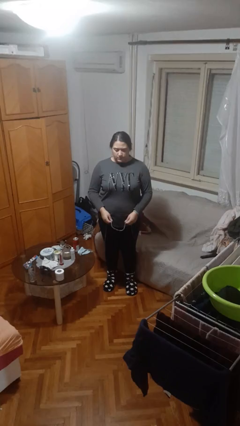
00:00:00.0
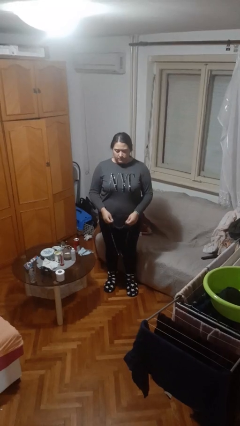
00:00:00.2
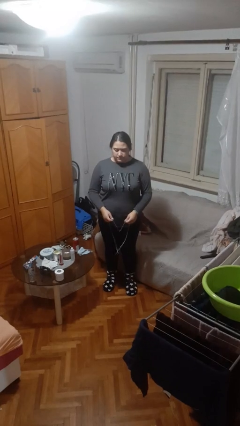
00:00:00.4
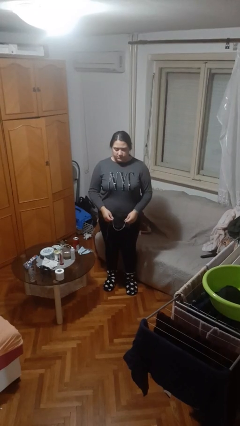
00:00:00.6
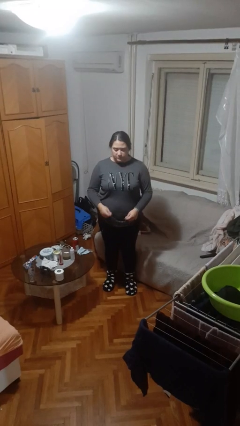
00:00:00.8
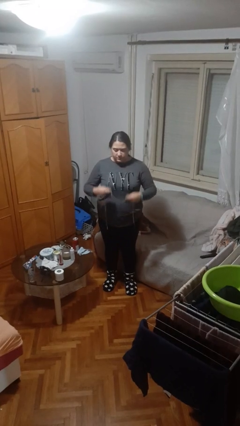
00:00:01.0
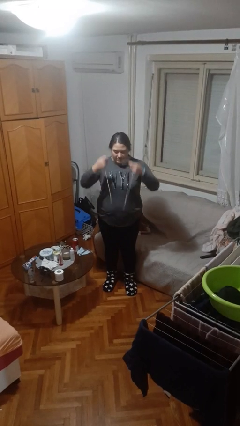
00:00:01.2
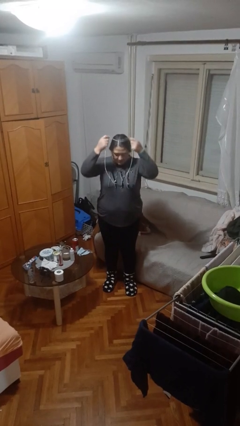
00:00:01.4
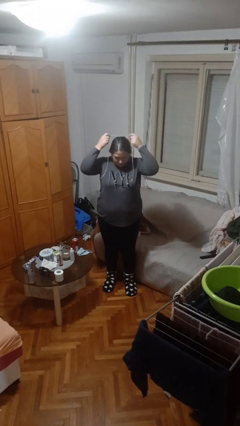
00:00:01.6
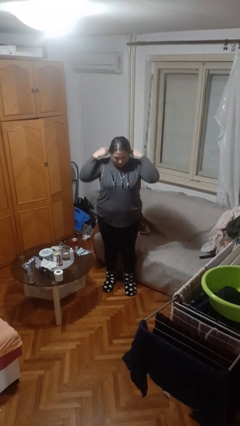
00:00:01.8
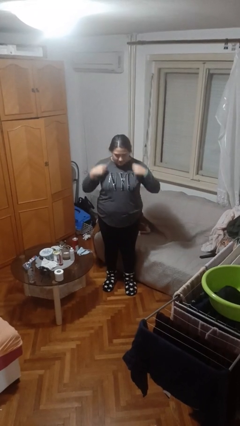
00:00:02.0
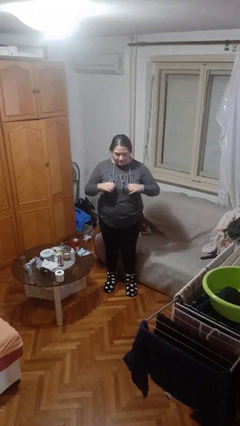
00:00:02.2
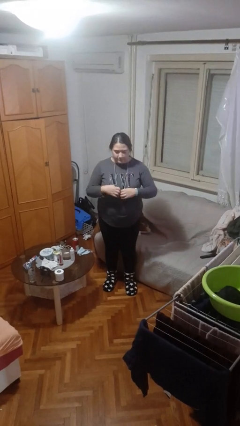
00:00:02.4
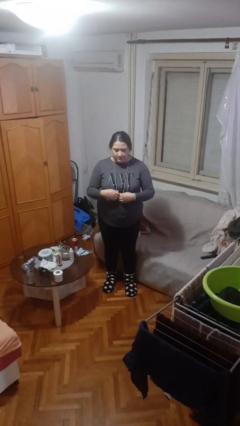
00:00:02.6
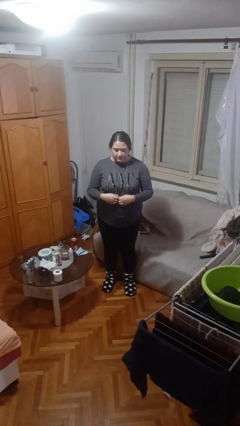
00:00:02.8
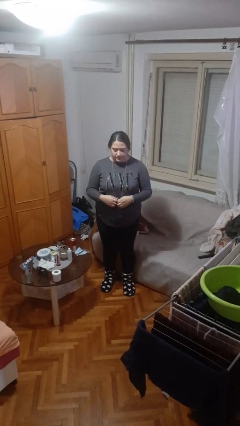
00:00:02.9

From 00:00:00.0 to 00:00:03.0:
person puts on necklace

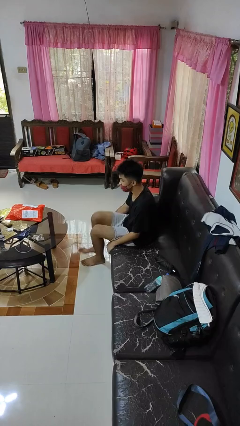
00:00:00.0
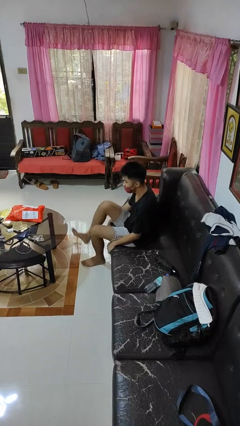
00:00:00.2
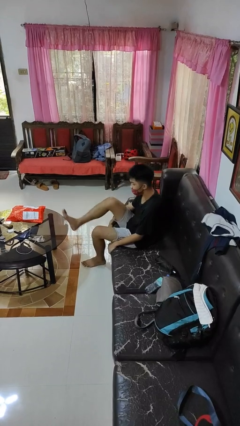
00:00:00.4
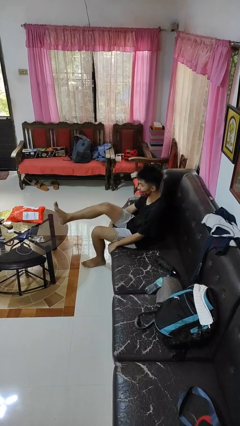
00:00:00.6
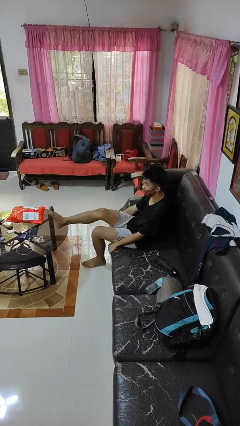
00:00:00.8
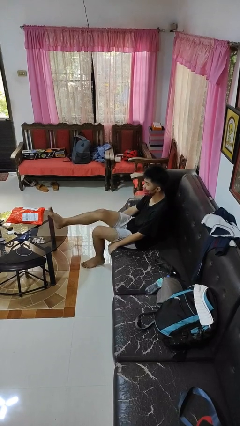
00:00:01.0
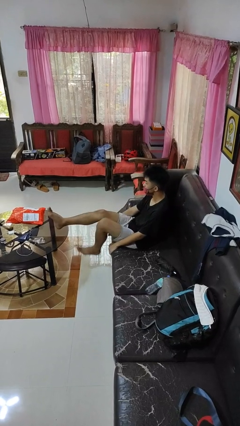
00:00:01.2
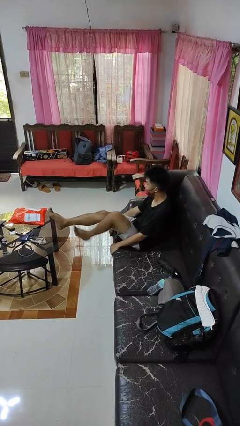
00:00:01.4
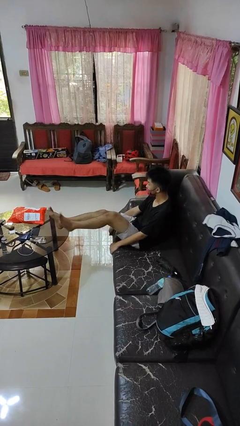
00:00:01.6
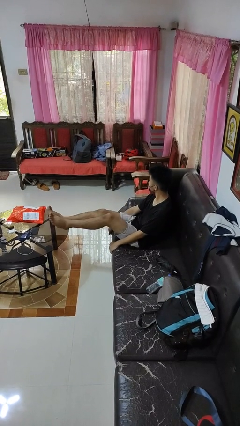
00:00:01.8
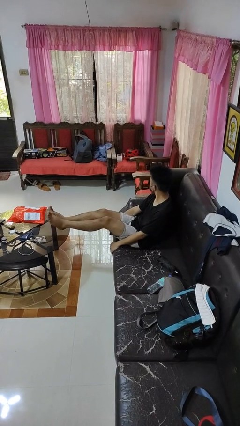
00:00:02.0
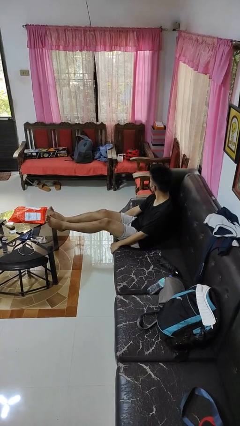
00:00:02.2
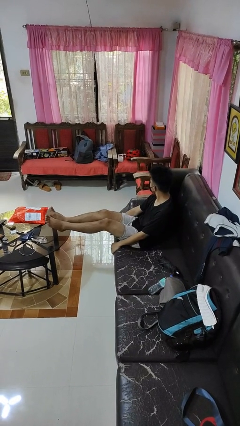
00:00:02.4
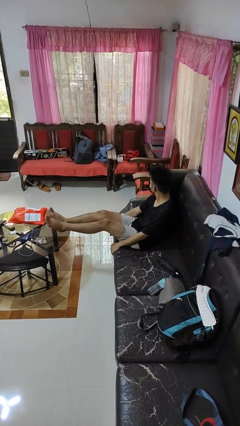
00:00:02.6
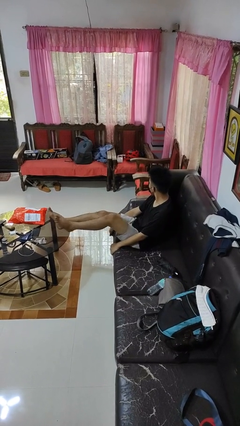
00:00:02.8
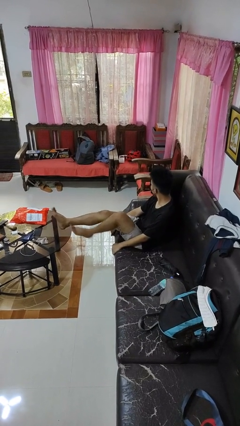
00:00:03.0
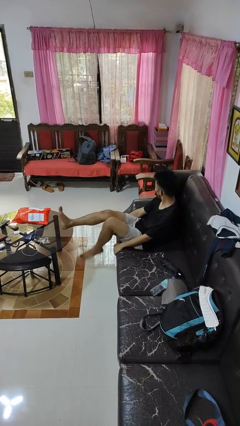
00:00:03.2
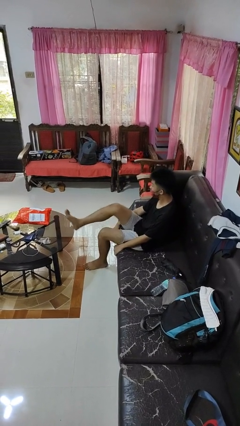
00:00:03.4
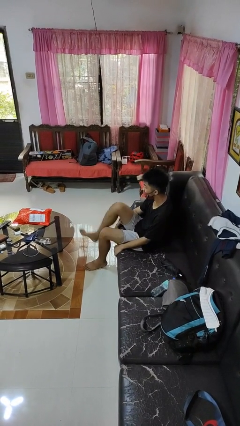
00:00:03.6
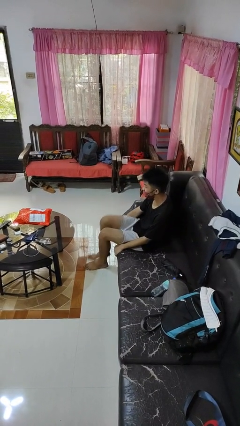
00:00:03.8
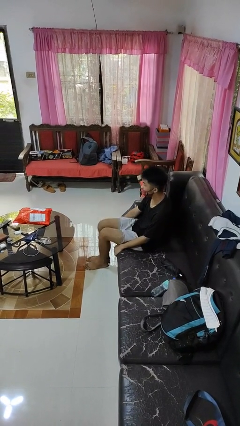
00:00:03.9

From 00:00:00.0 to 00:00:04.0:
person puts feet up

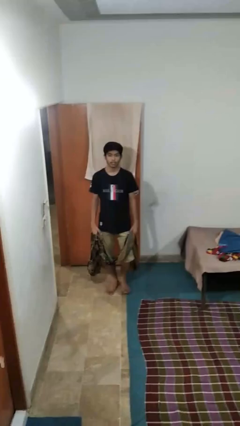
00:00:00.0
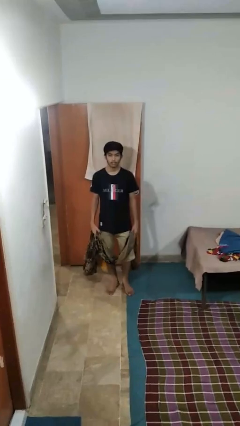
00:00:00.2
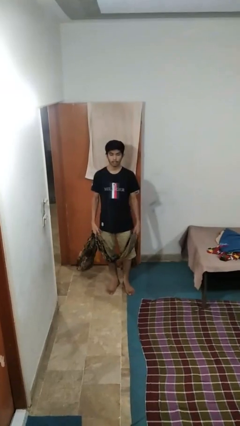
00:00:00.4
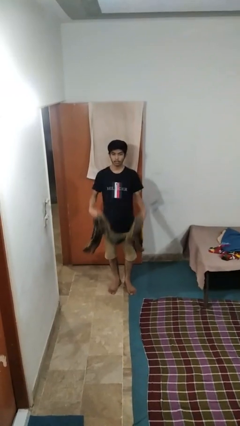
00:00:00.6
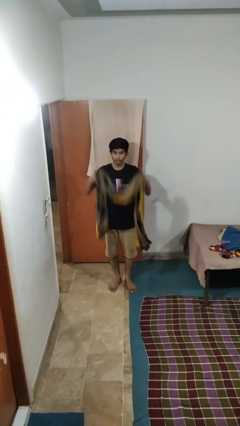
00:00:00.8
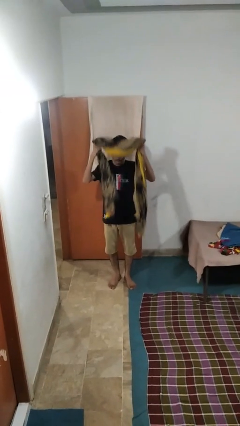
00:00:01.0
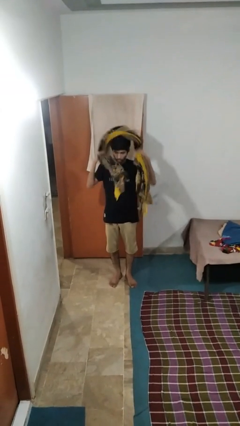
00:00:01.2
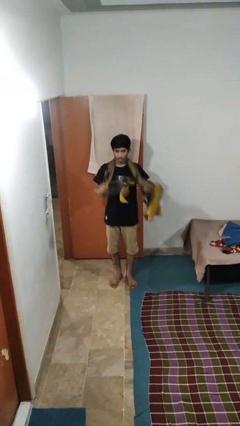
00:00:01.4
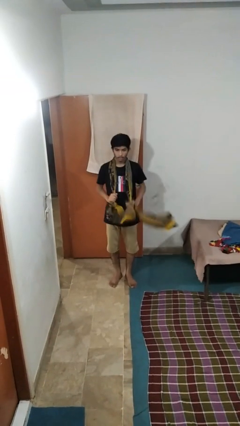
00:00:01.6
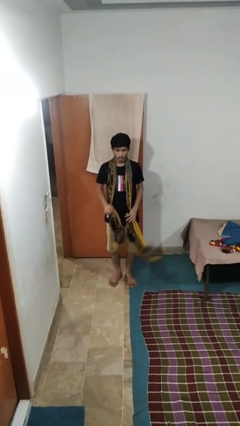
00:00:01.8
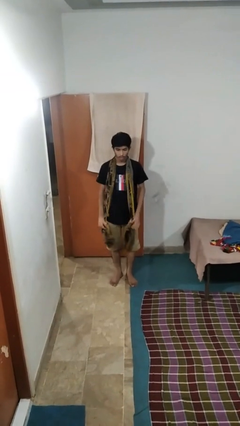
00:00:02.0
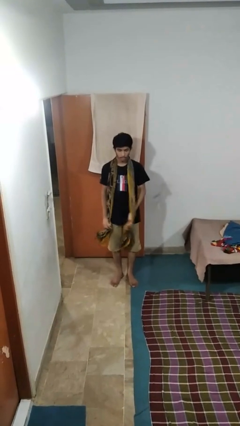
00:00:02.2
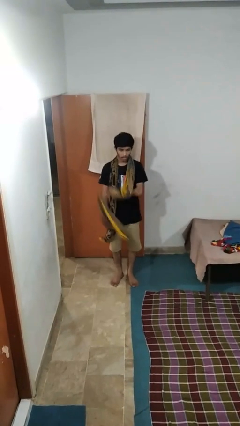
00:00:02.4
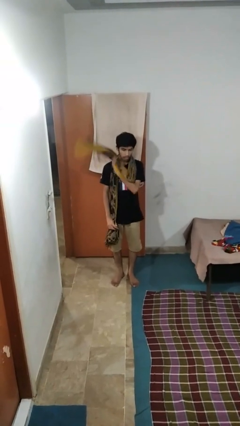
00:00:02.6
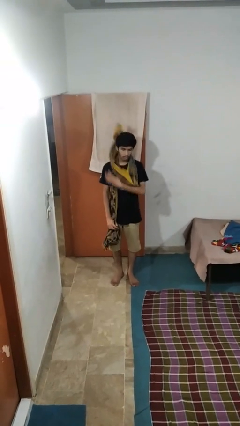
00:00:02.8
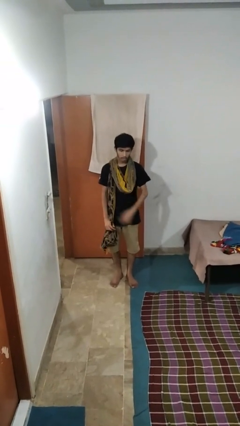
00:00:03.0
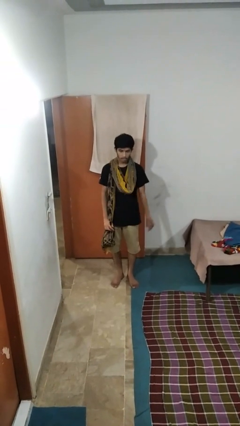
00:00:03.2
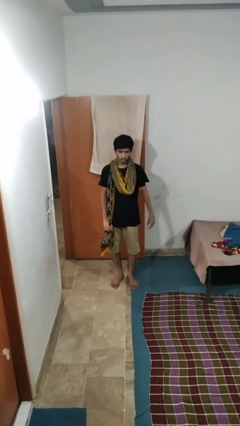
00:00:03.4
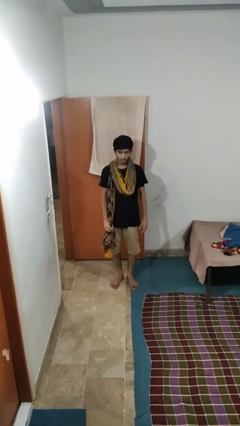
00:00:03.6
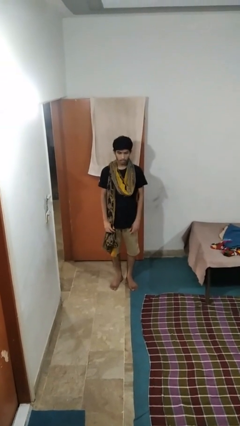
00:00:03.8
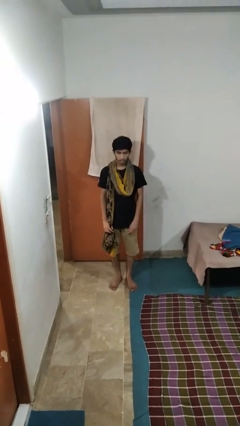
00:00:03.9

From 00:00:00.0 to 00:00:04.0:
person puts on scarf

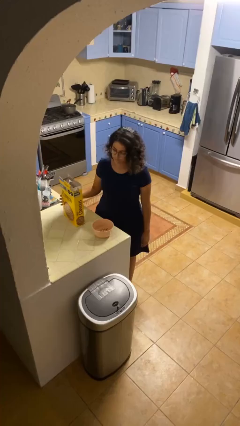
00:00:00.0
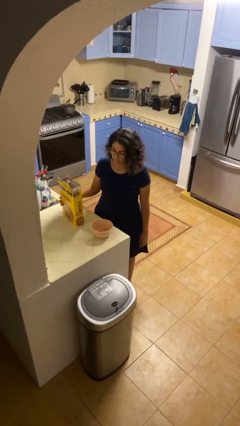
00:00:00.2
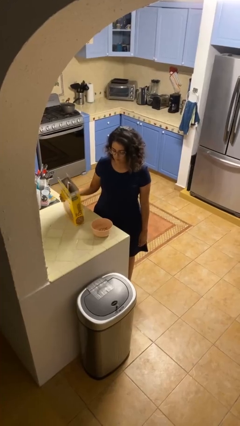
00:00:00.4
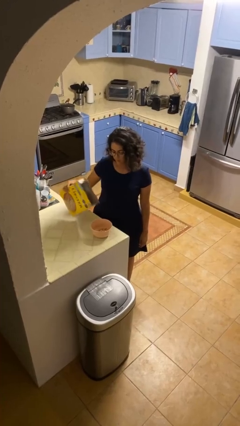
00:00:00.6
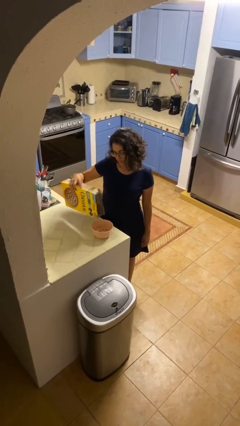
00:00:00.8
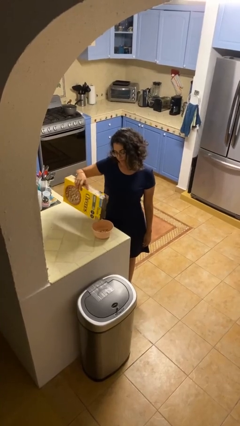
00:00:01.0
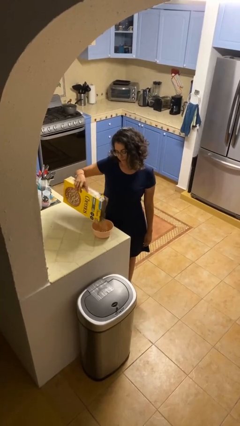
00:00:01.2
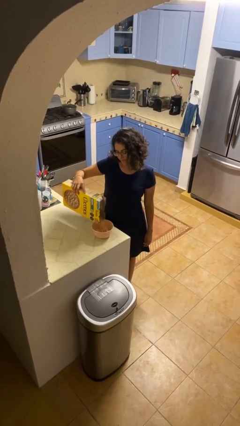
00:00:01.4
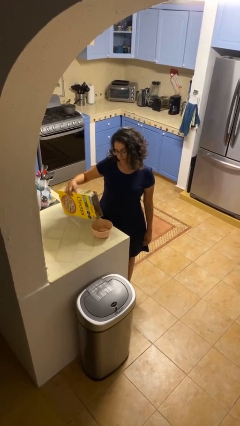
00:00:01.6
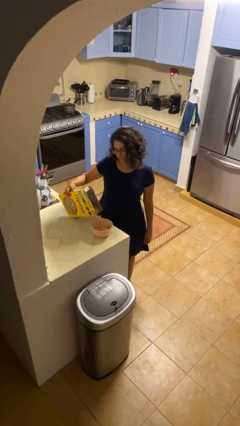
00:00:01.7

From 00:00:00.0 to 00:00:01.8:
person pours into bowl

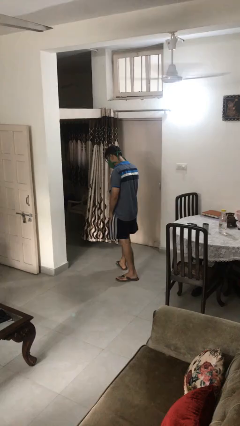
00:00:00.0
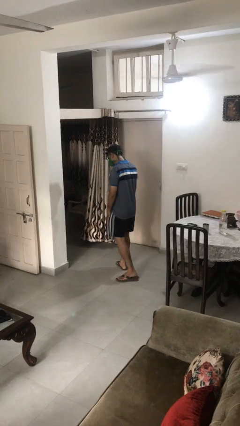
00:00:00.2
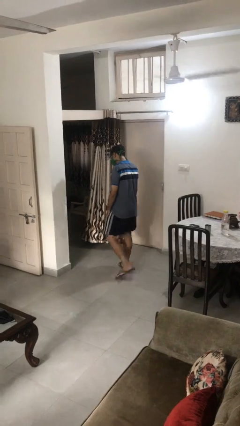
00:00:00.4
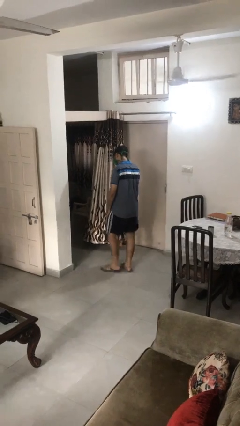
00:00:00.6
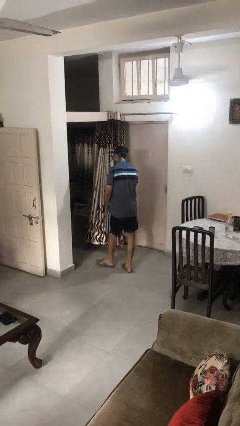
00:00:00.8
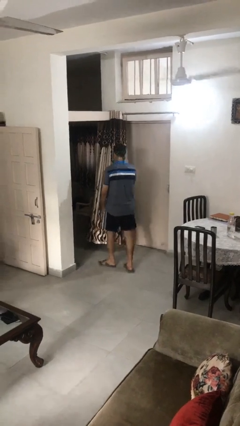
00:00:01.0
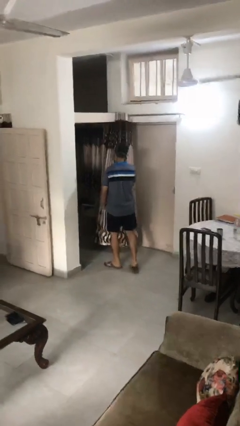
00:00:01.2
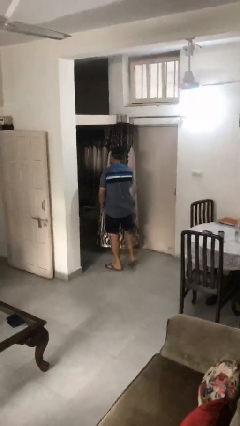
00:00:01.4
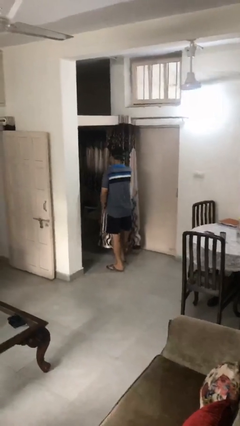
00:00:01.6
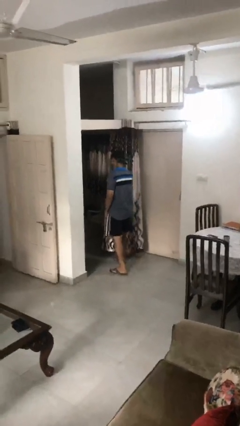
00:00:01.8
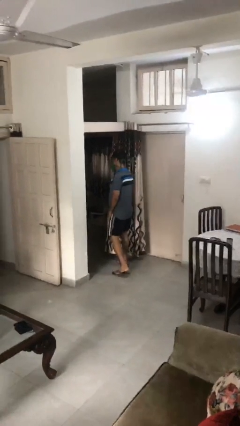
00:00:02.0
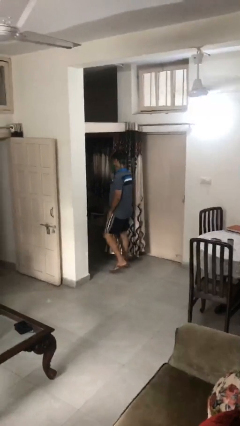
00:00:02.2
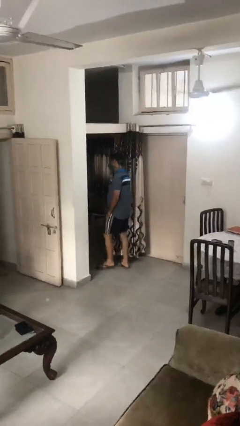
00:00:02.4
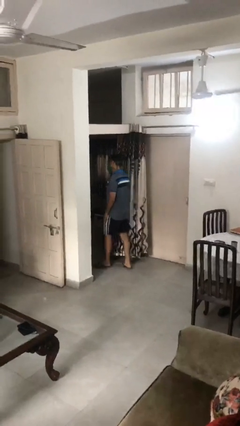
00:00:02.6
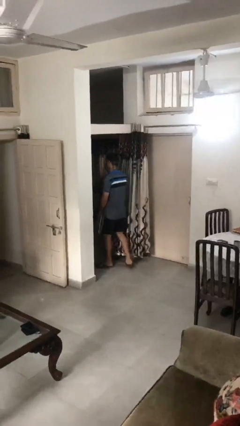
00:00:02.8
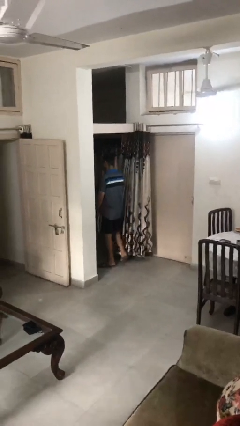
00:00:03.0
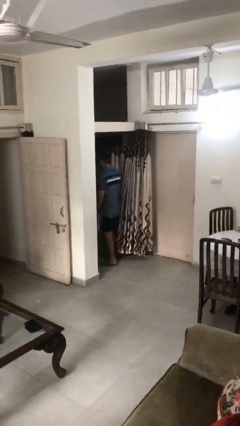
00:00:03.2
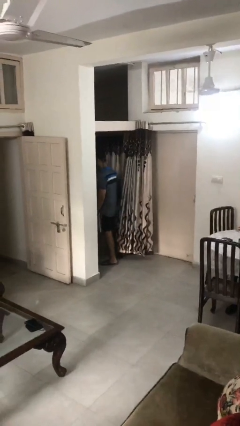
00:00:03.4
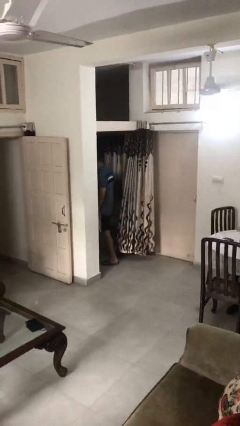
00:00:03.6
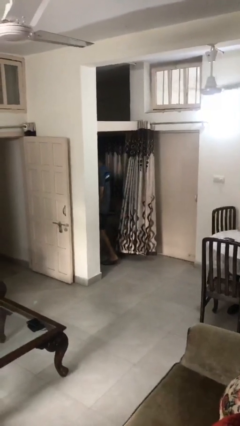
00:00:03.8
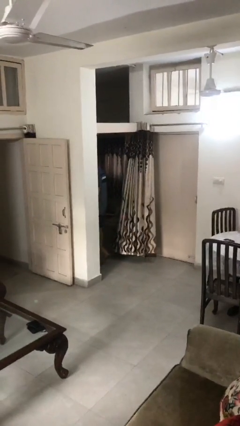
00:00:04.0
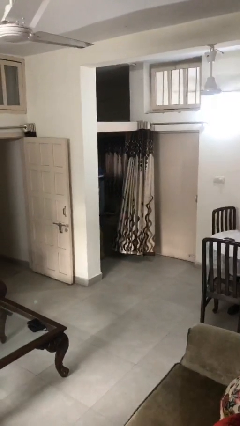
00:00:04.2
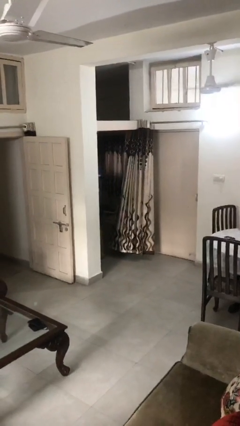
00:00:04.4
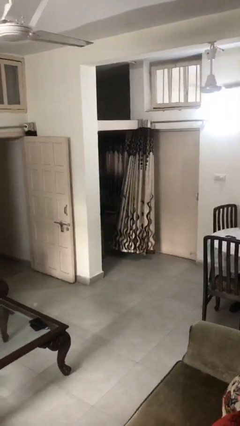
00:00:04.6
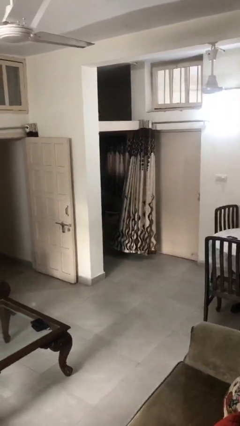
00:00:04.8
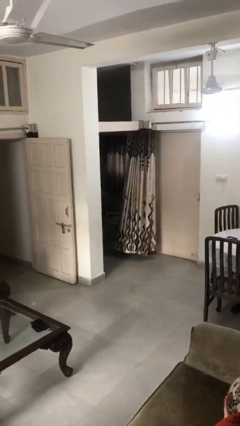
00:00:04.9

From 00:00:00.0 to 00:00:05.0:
person exits scene through structure
